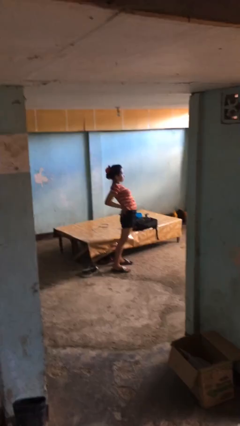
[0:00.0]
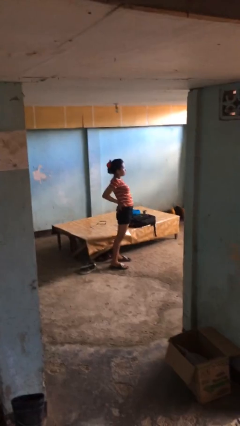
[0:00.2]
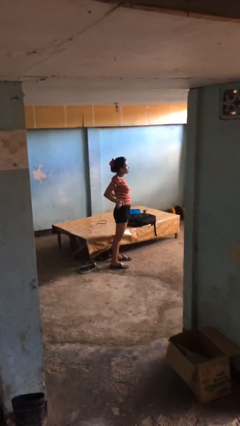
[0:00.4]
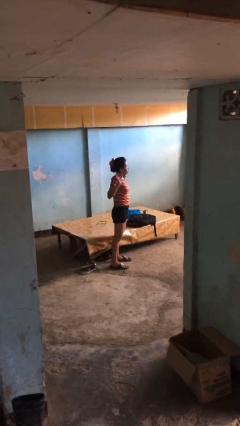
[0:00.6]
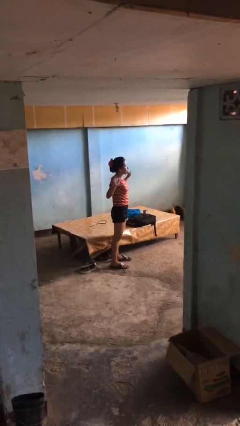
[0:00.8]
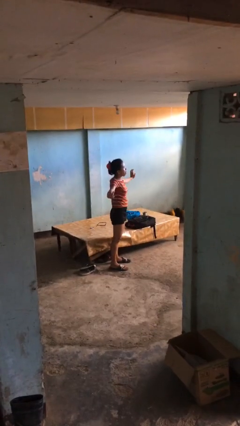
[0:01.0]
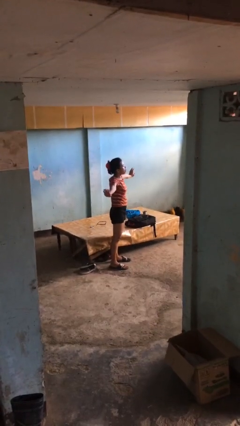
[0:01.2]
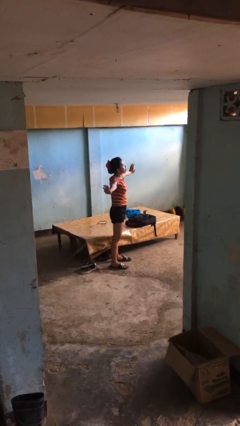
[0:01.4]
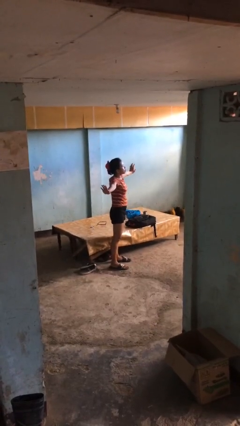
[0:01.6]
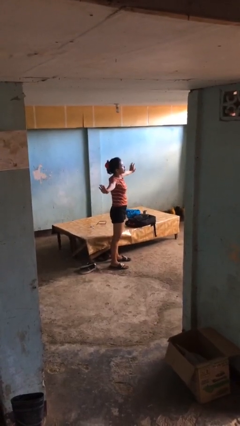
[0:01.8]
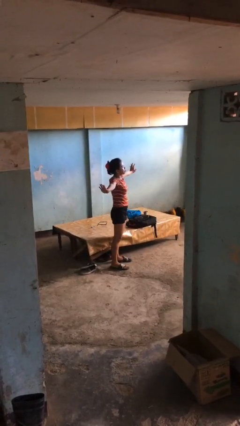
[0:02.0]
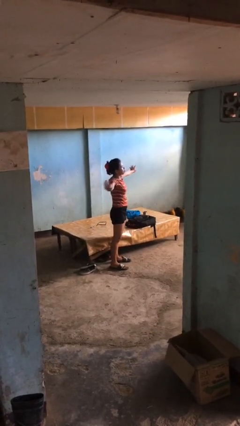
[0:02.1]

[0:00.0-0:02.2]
person stretches arms to side

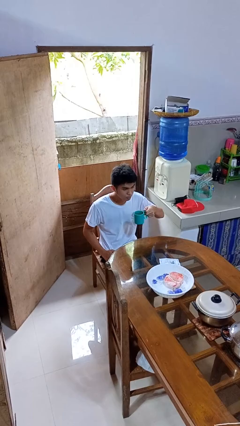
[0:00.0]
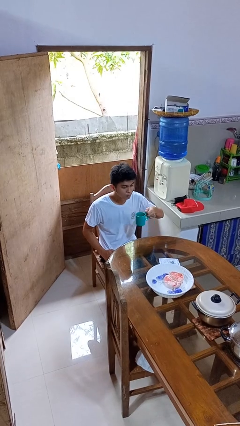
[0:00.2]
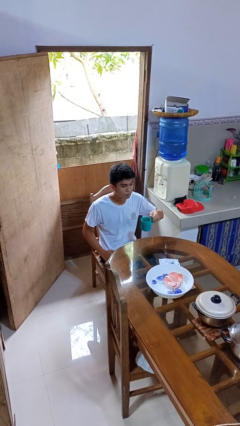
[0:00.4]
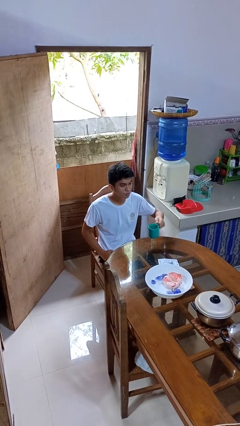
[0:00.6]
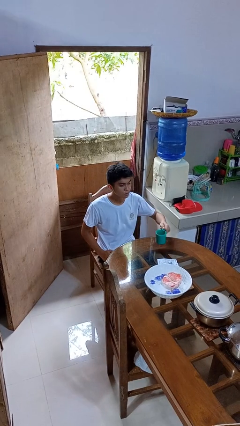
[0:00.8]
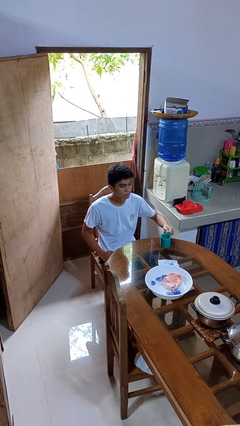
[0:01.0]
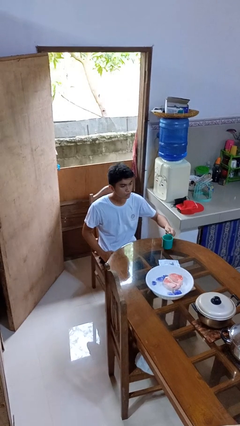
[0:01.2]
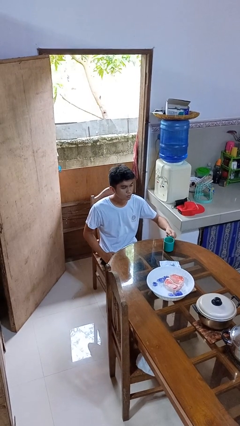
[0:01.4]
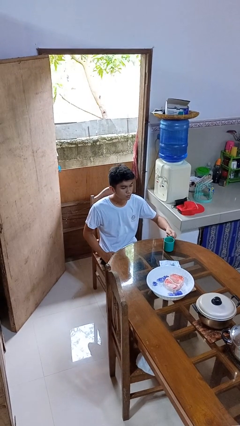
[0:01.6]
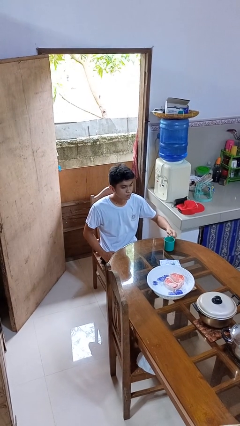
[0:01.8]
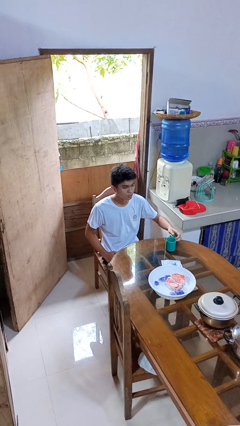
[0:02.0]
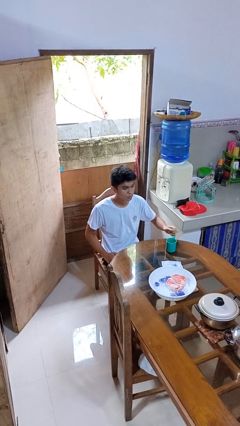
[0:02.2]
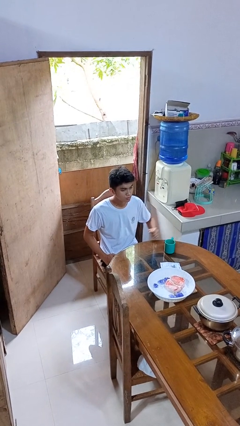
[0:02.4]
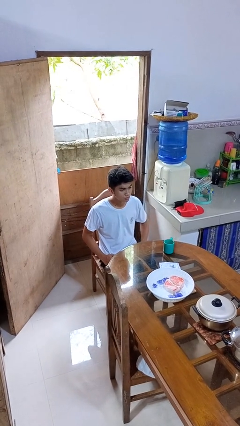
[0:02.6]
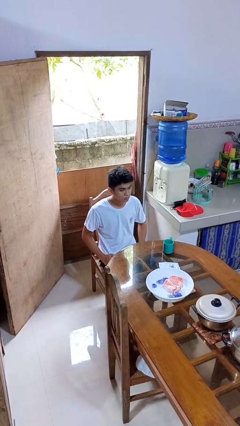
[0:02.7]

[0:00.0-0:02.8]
person puts down object on table

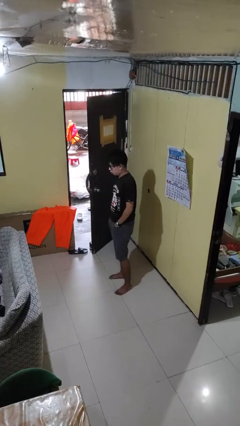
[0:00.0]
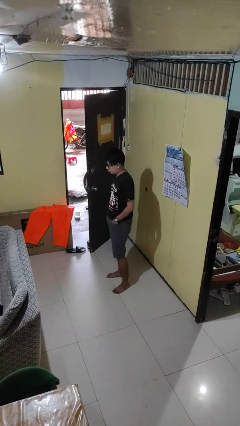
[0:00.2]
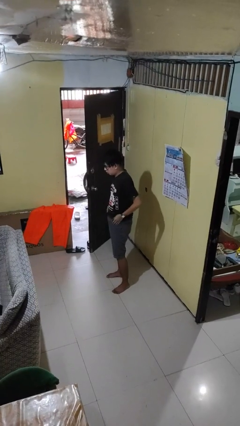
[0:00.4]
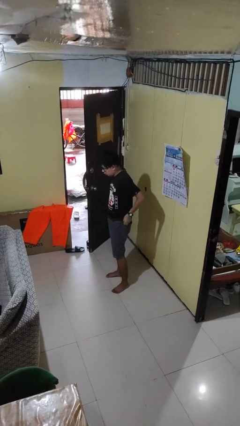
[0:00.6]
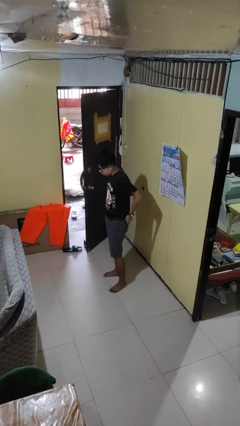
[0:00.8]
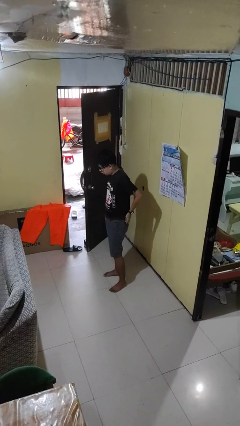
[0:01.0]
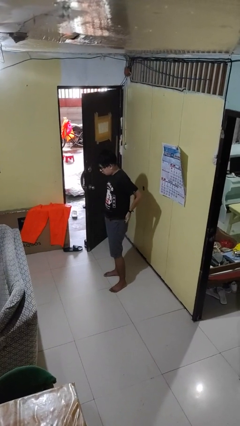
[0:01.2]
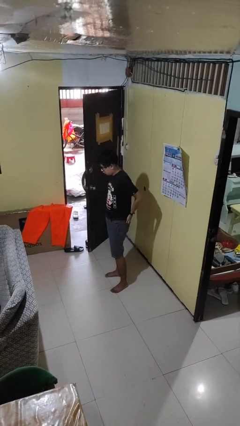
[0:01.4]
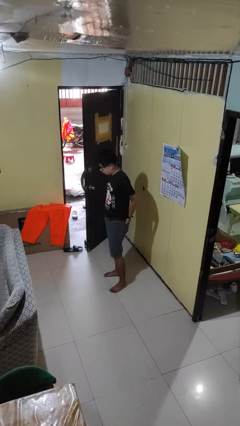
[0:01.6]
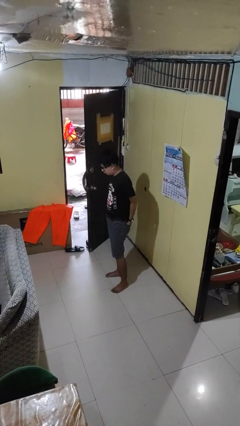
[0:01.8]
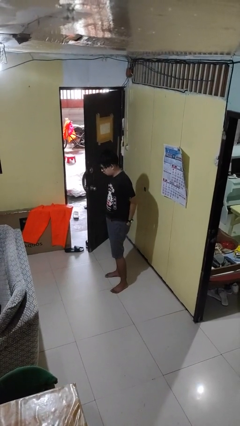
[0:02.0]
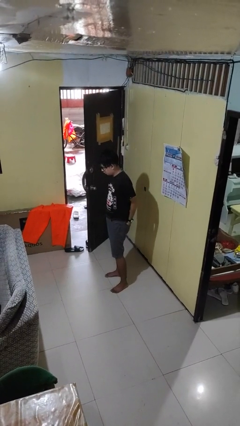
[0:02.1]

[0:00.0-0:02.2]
person puts hands in back pockets

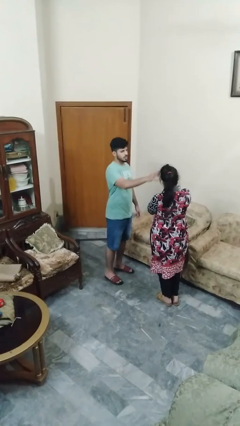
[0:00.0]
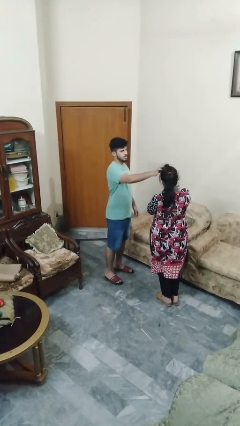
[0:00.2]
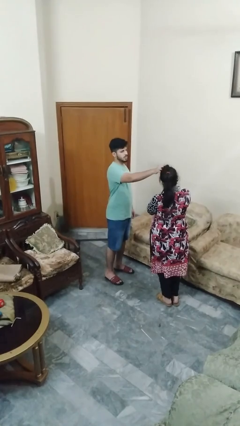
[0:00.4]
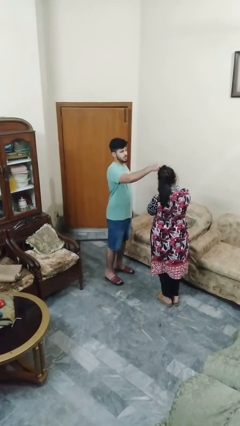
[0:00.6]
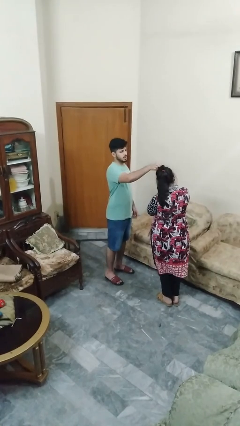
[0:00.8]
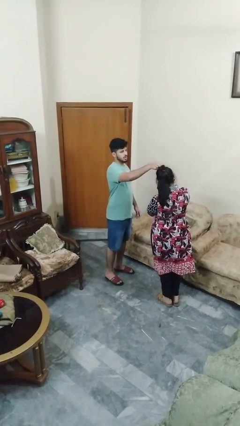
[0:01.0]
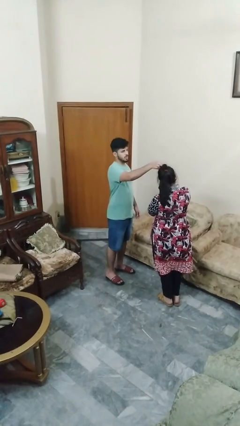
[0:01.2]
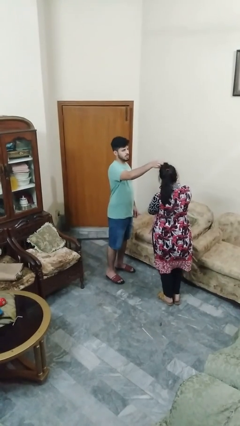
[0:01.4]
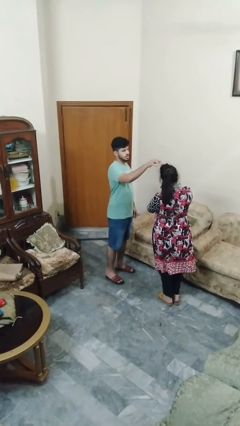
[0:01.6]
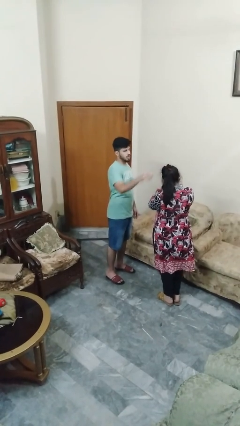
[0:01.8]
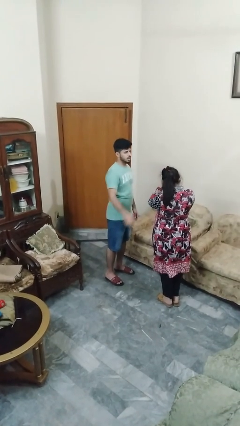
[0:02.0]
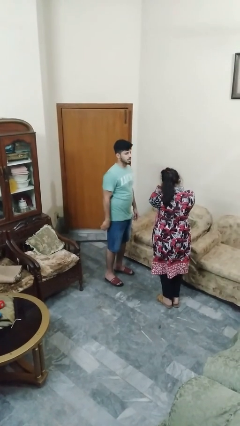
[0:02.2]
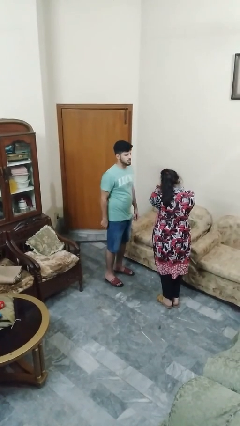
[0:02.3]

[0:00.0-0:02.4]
person grabs person by hair

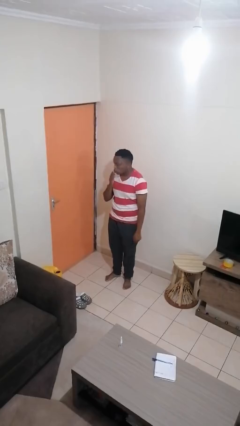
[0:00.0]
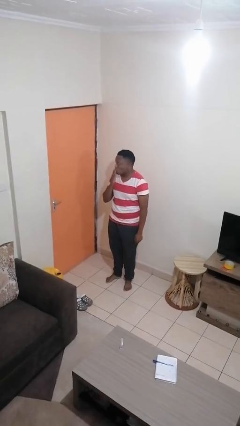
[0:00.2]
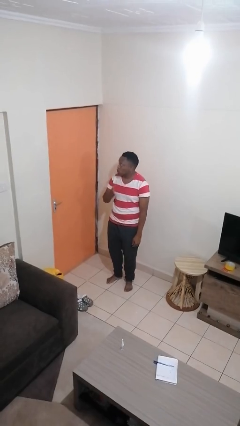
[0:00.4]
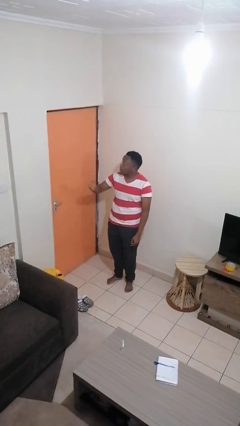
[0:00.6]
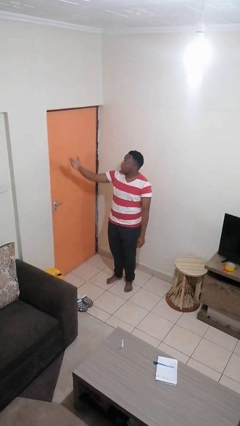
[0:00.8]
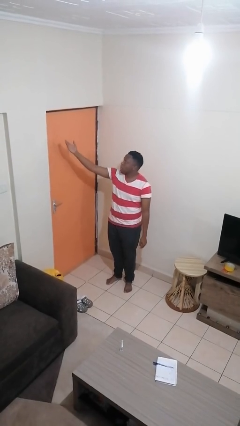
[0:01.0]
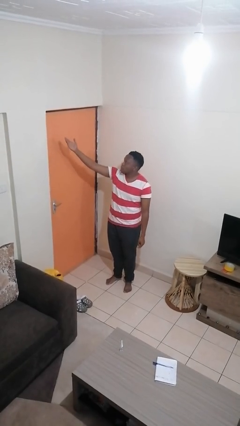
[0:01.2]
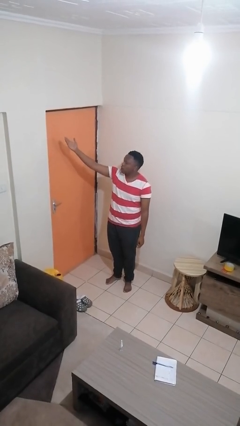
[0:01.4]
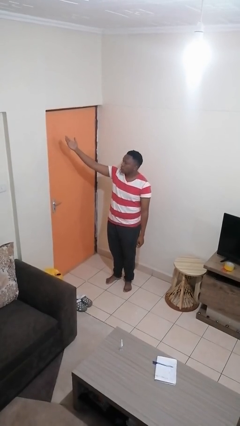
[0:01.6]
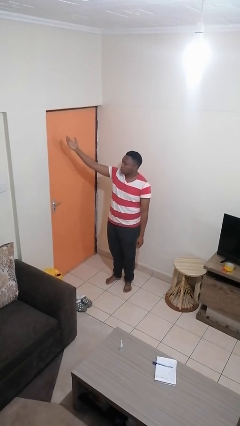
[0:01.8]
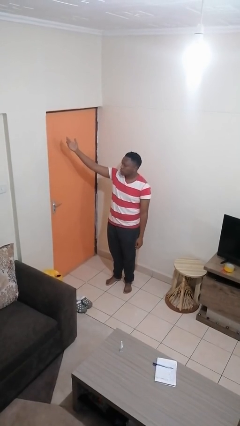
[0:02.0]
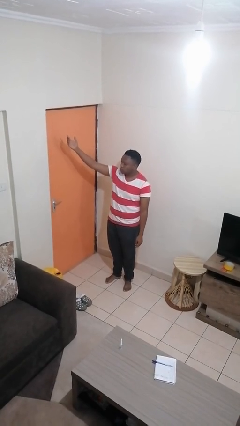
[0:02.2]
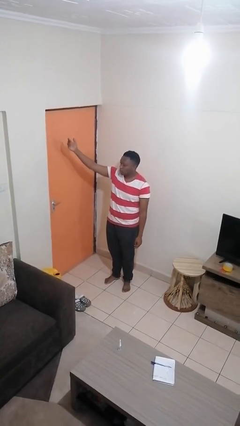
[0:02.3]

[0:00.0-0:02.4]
person gestures blow kiss

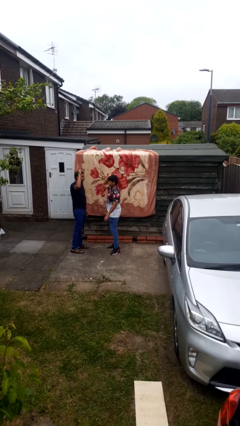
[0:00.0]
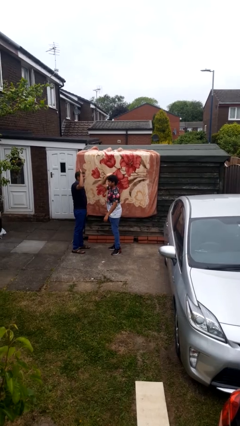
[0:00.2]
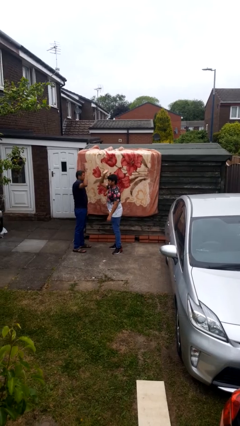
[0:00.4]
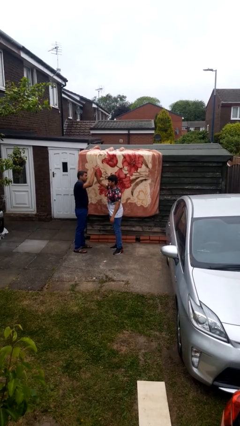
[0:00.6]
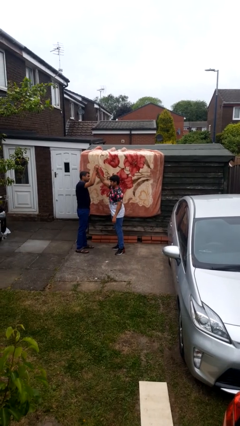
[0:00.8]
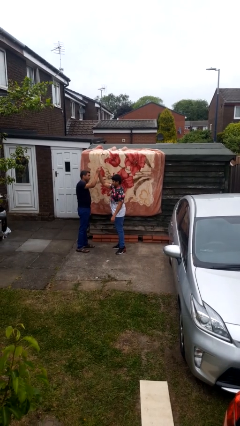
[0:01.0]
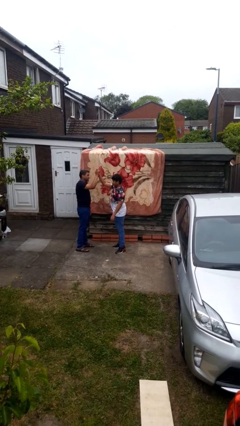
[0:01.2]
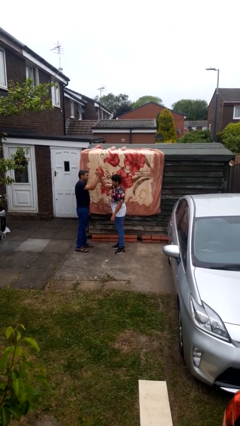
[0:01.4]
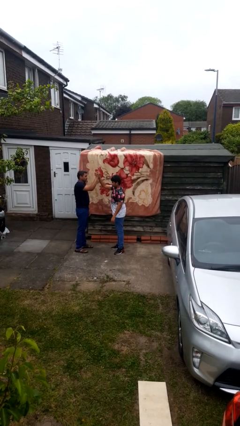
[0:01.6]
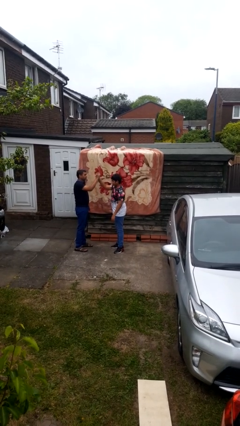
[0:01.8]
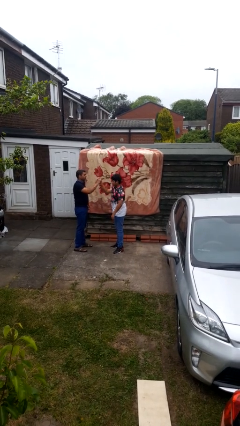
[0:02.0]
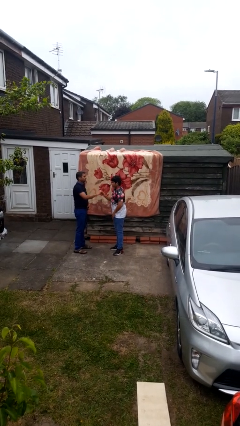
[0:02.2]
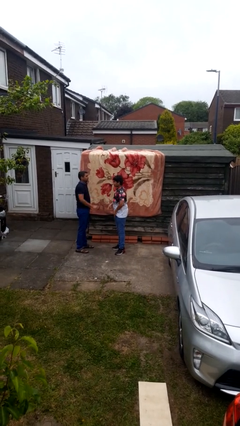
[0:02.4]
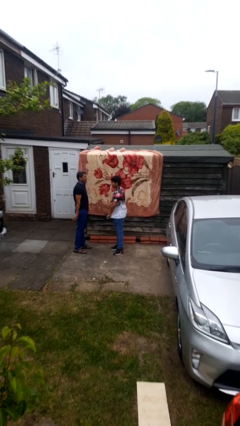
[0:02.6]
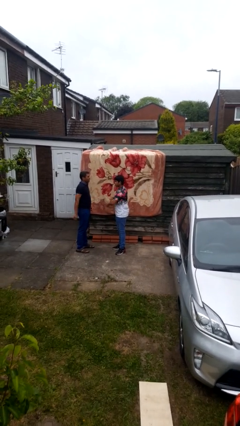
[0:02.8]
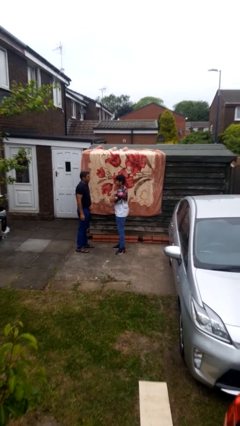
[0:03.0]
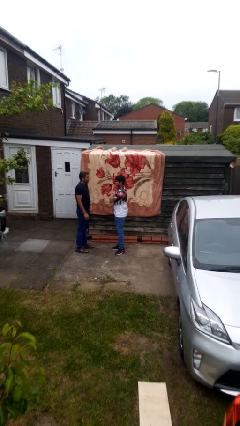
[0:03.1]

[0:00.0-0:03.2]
person highfives hand

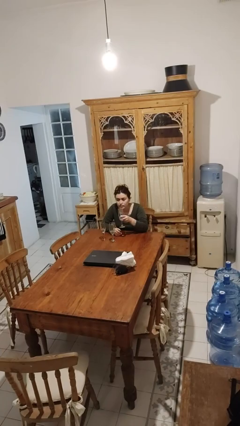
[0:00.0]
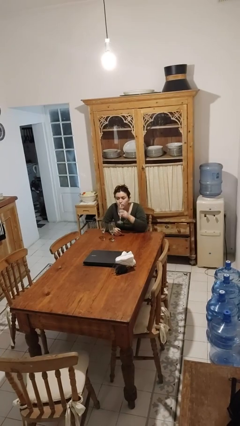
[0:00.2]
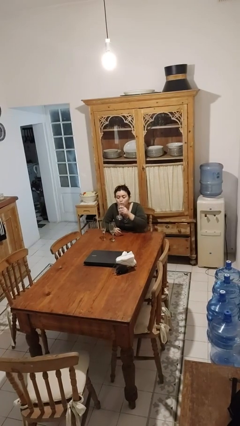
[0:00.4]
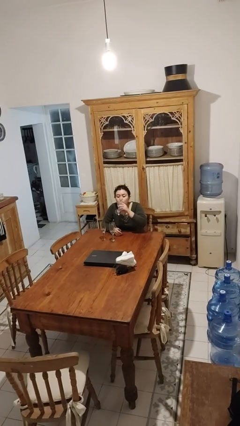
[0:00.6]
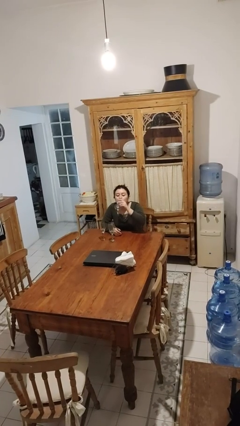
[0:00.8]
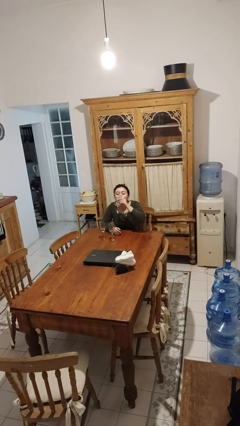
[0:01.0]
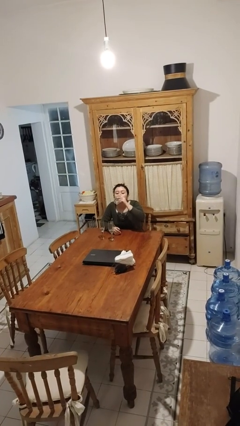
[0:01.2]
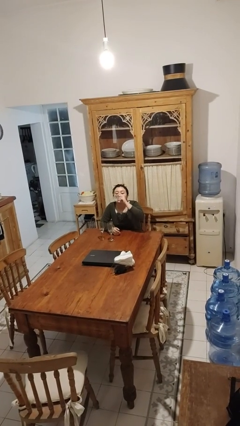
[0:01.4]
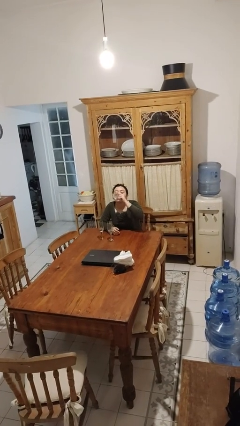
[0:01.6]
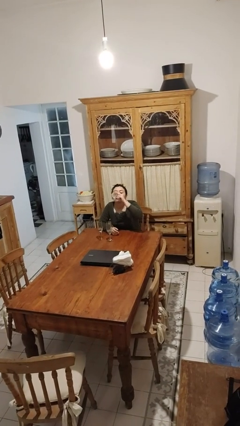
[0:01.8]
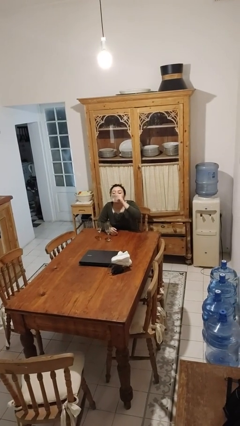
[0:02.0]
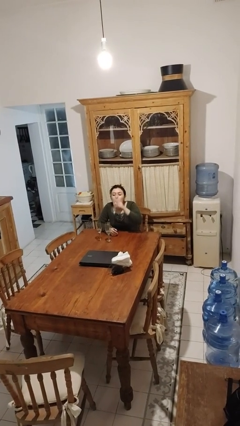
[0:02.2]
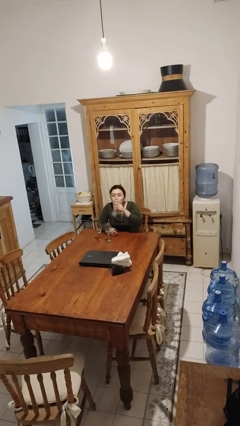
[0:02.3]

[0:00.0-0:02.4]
person drinks from shotglass
